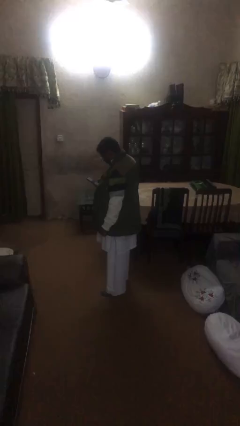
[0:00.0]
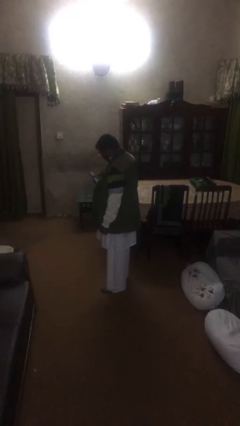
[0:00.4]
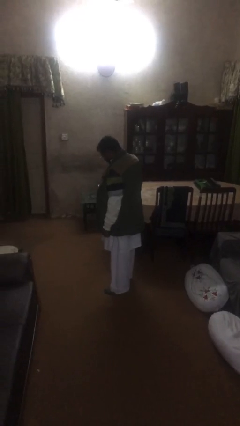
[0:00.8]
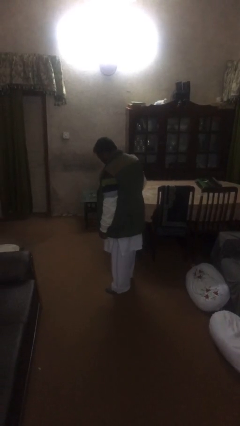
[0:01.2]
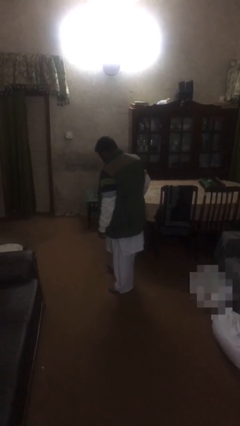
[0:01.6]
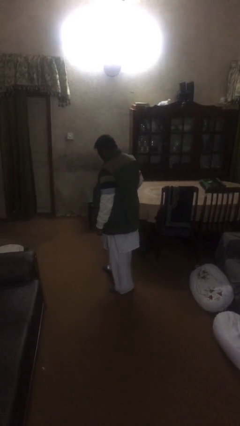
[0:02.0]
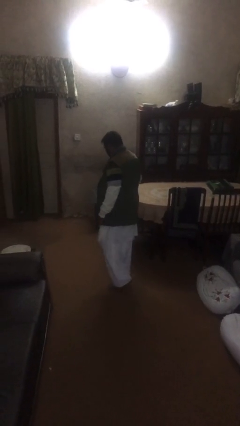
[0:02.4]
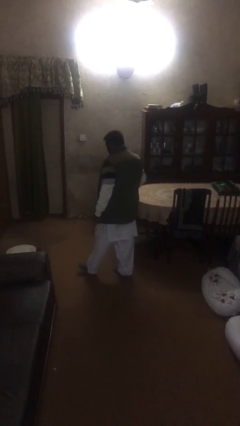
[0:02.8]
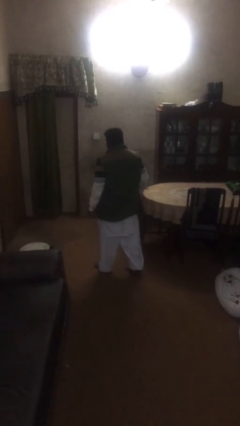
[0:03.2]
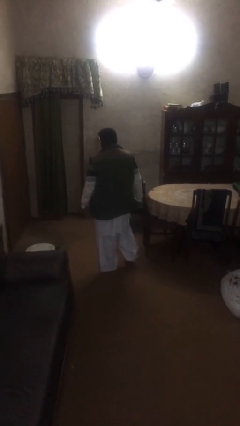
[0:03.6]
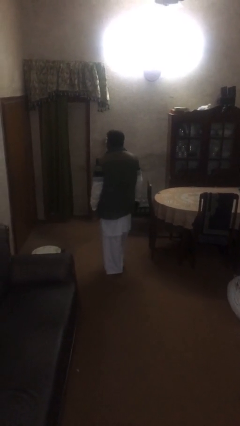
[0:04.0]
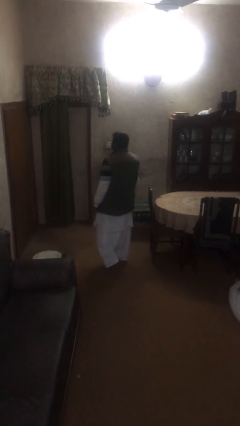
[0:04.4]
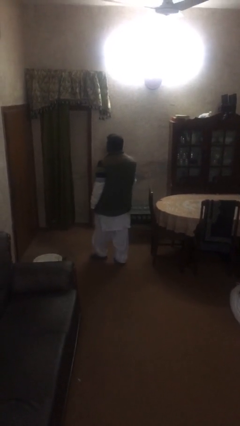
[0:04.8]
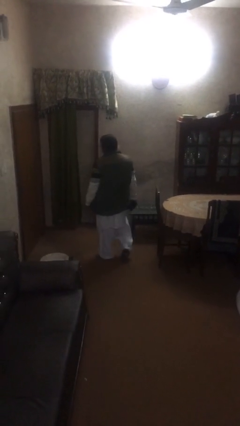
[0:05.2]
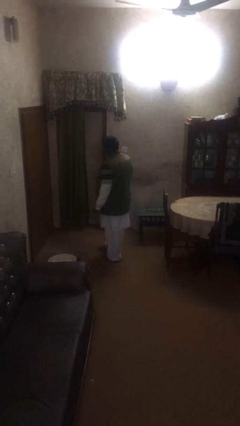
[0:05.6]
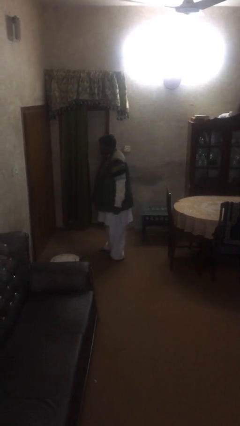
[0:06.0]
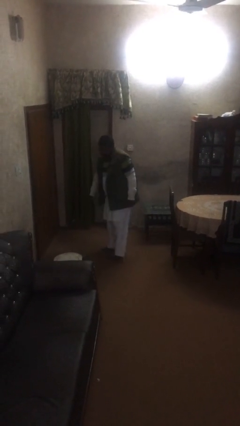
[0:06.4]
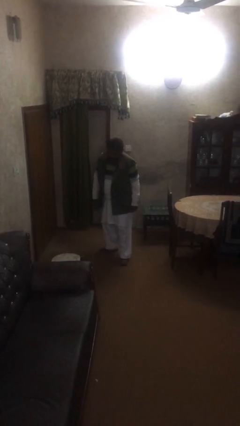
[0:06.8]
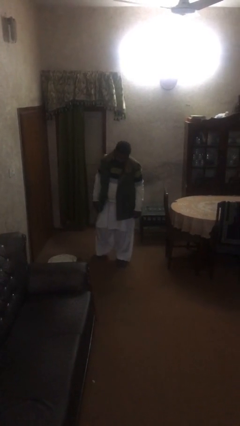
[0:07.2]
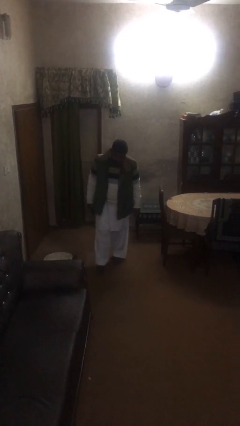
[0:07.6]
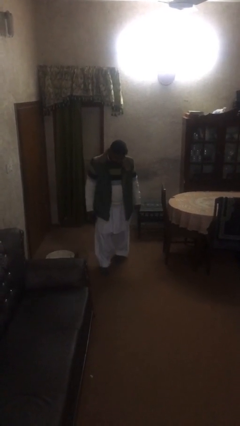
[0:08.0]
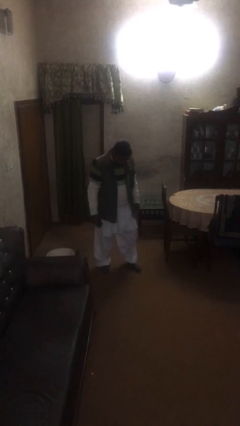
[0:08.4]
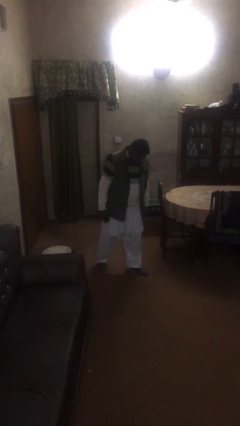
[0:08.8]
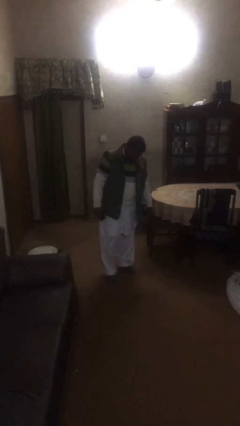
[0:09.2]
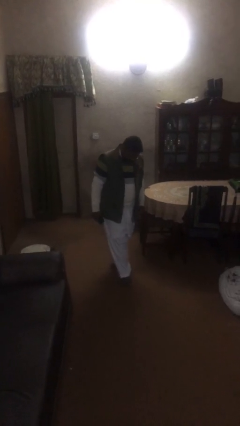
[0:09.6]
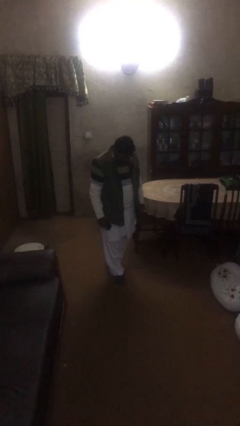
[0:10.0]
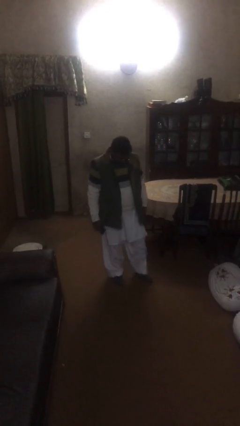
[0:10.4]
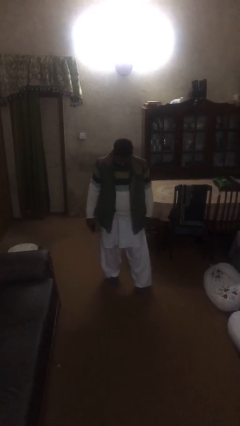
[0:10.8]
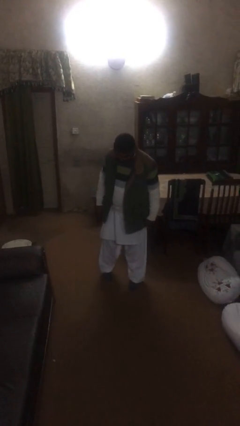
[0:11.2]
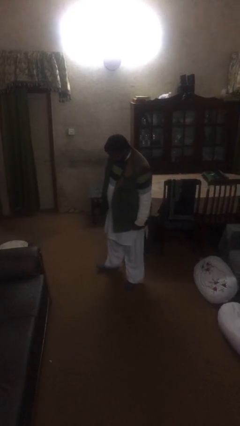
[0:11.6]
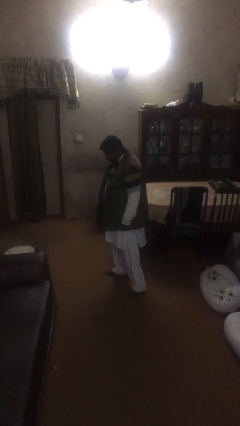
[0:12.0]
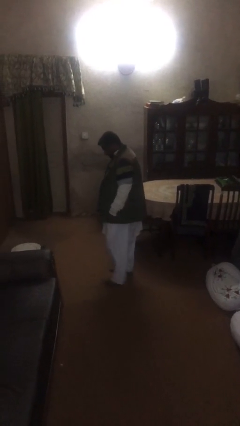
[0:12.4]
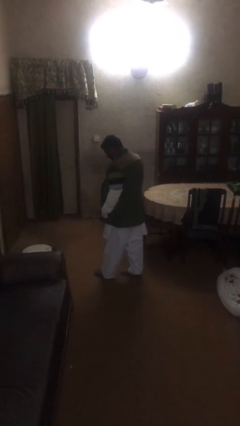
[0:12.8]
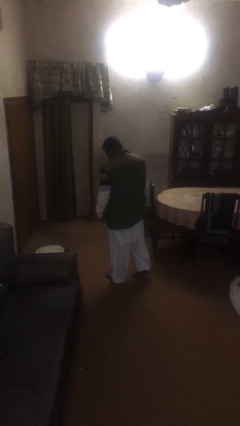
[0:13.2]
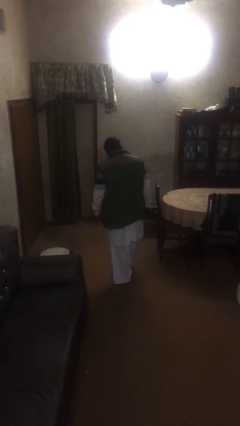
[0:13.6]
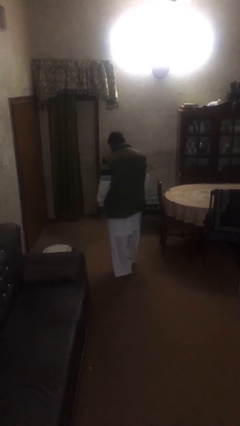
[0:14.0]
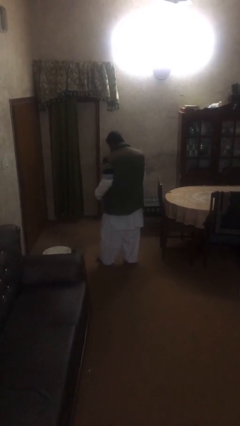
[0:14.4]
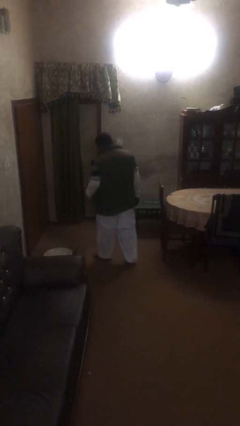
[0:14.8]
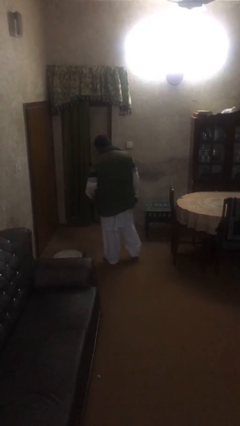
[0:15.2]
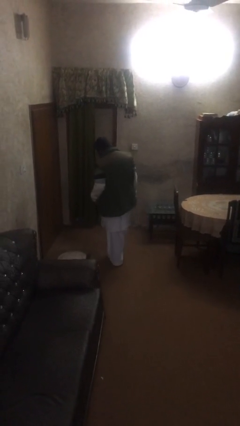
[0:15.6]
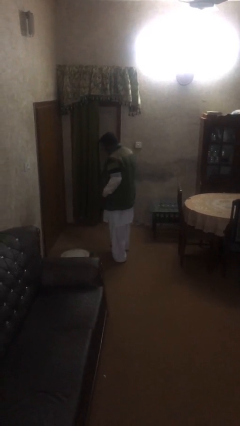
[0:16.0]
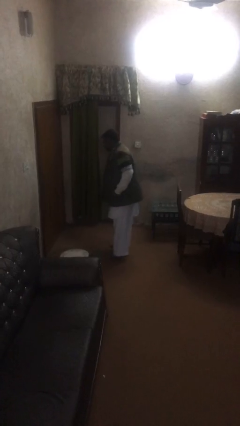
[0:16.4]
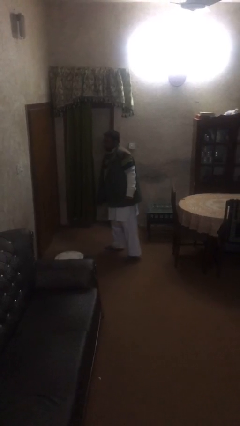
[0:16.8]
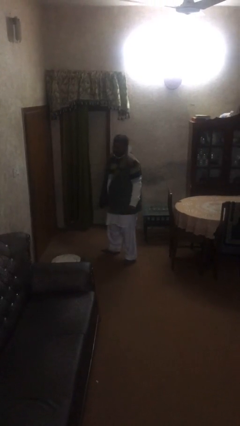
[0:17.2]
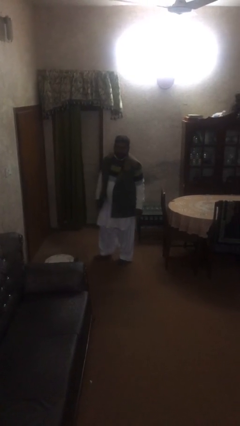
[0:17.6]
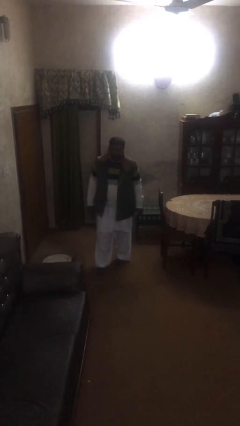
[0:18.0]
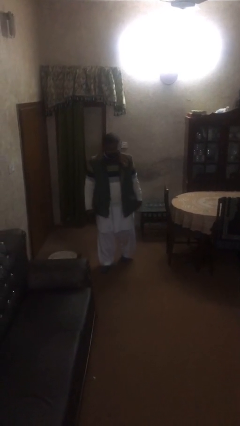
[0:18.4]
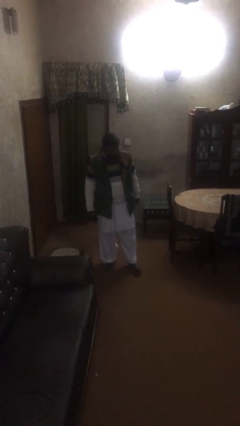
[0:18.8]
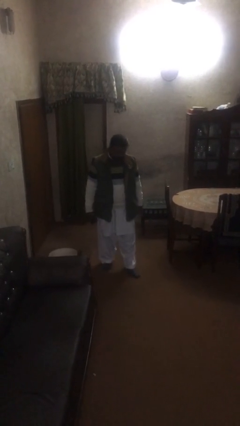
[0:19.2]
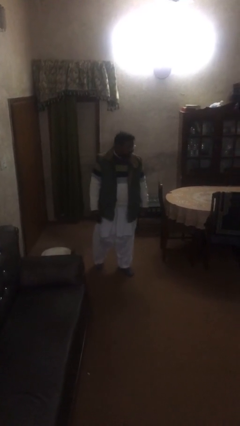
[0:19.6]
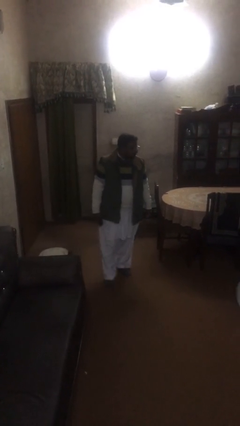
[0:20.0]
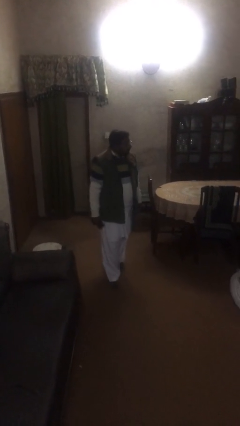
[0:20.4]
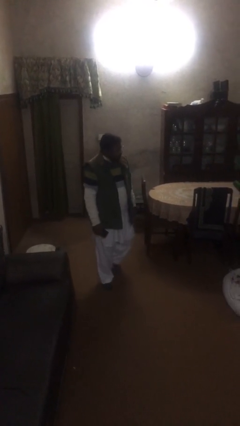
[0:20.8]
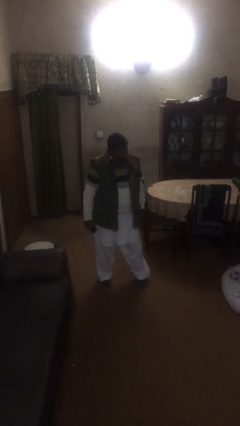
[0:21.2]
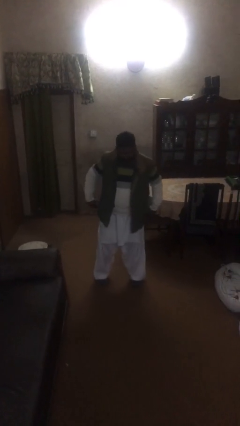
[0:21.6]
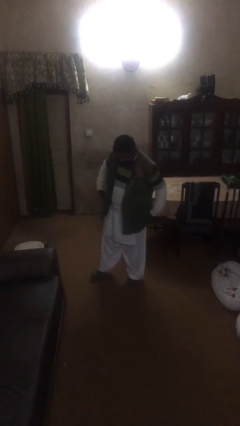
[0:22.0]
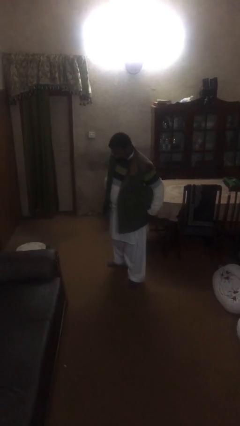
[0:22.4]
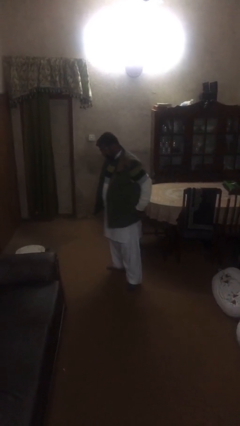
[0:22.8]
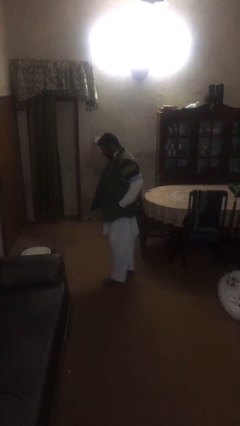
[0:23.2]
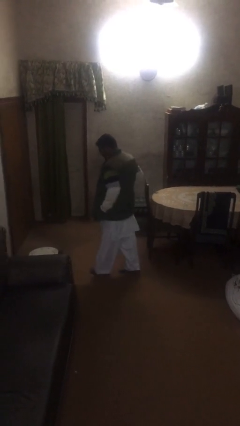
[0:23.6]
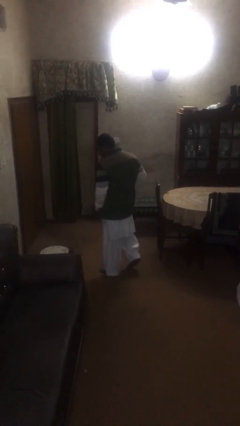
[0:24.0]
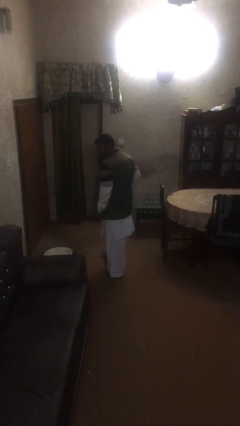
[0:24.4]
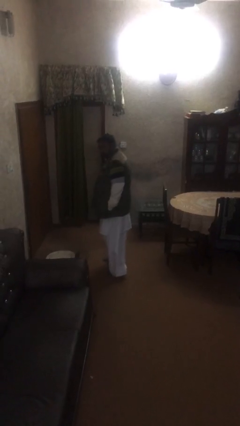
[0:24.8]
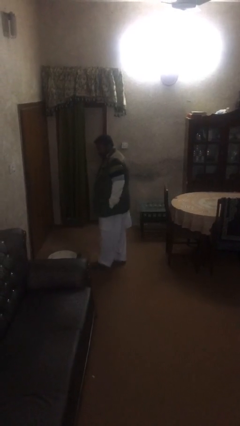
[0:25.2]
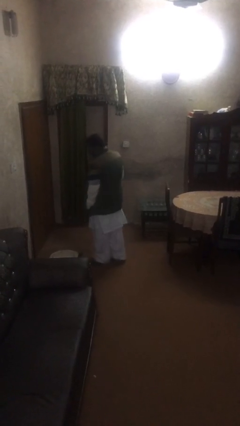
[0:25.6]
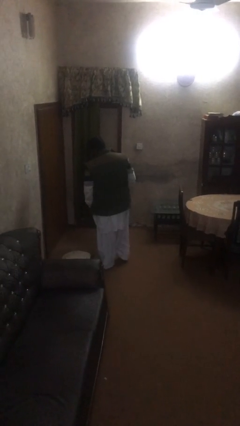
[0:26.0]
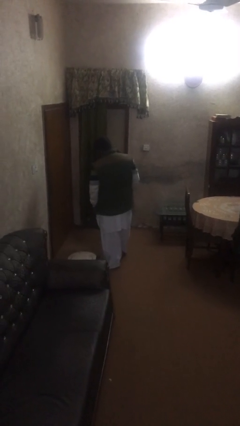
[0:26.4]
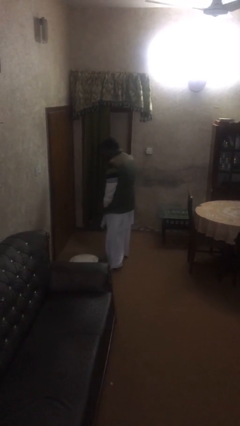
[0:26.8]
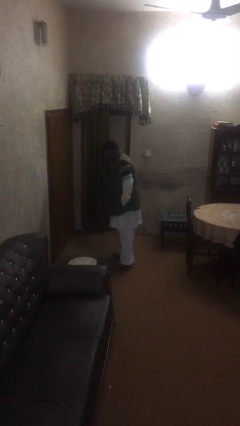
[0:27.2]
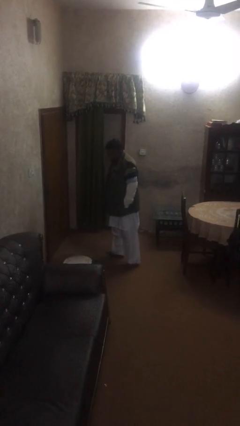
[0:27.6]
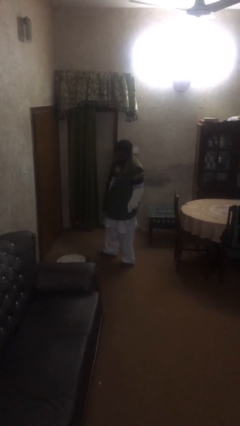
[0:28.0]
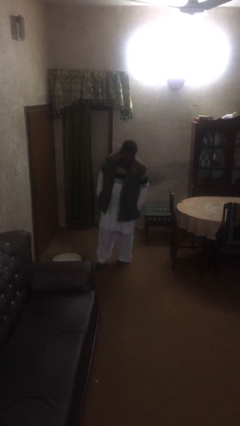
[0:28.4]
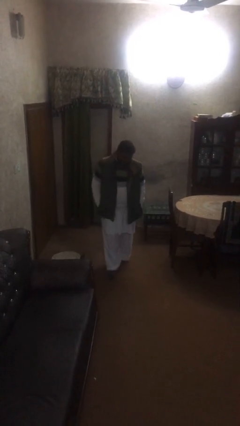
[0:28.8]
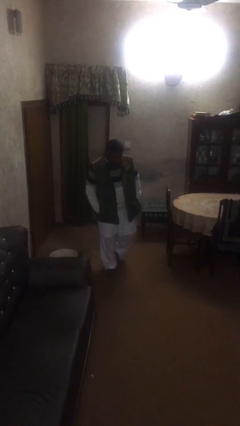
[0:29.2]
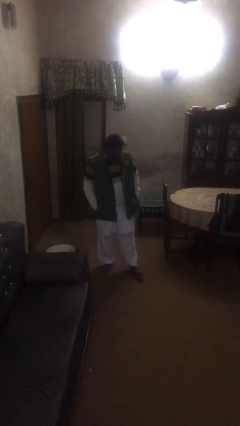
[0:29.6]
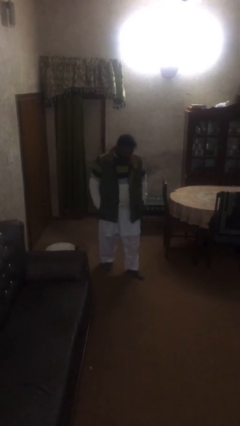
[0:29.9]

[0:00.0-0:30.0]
person walks

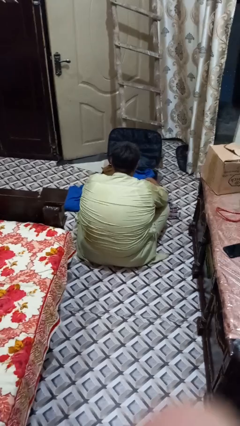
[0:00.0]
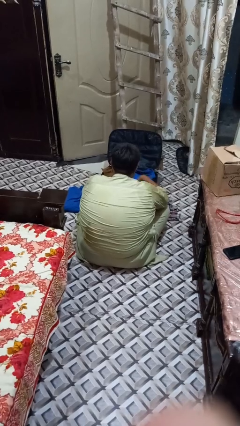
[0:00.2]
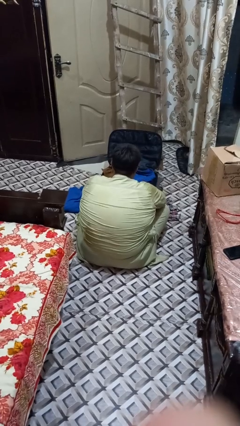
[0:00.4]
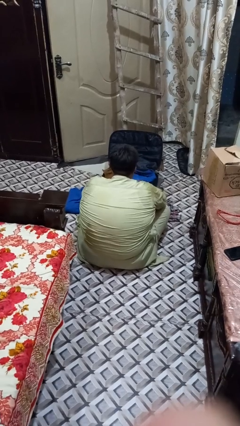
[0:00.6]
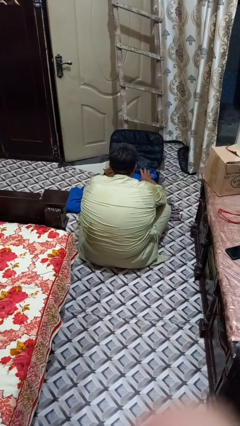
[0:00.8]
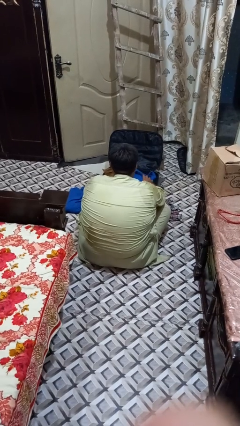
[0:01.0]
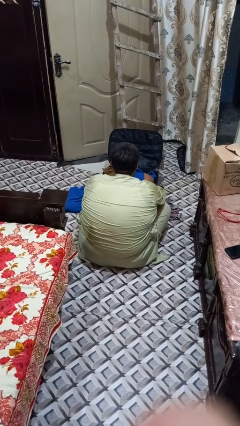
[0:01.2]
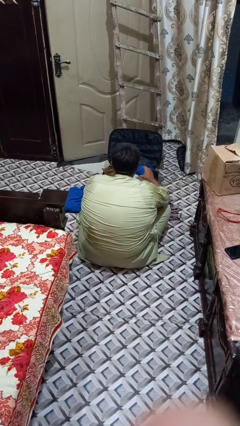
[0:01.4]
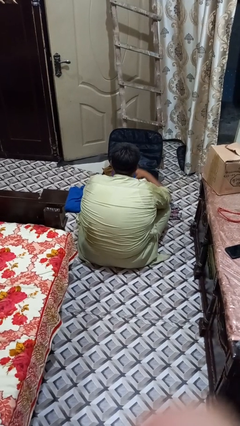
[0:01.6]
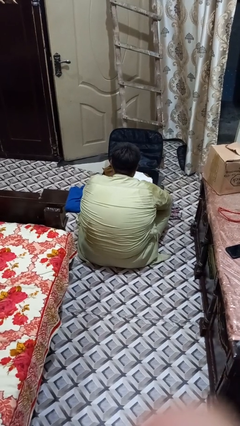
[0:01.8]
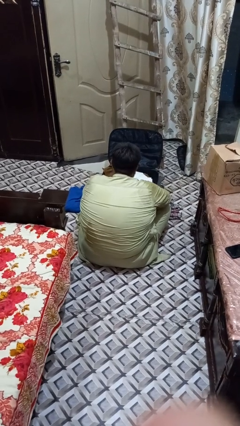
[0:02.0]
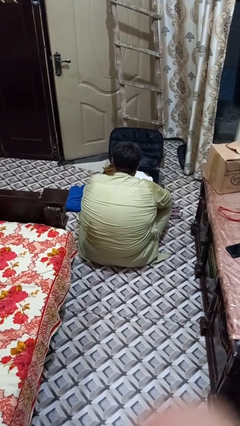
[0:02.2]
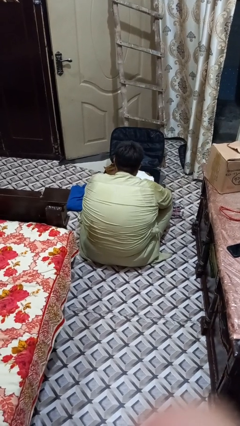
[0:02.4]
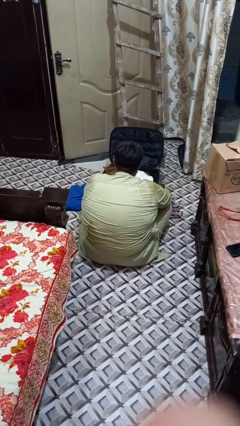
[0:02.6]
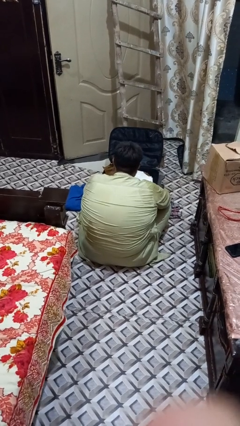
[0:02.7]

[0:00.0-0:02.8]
person unloads clothes from suitcase

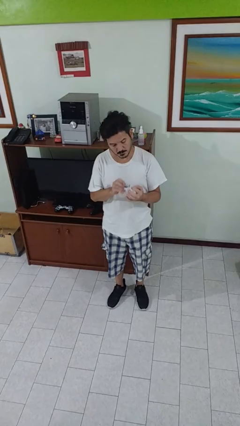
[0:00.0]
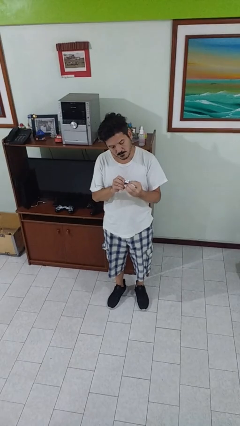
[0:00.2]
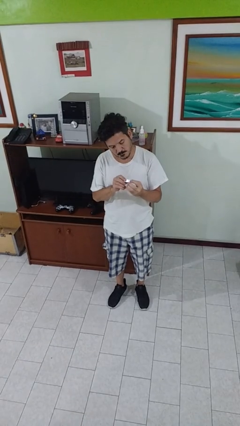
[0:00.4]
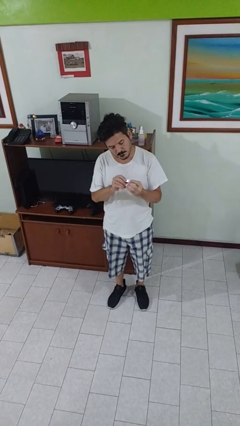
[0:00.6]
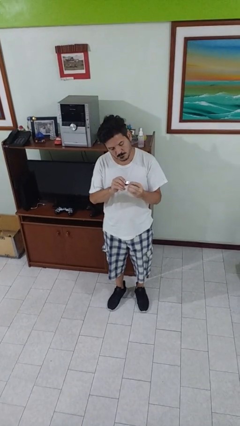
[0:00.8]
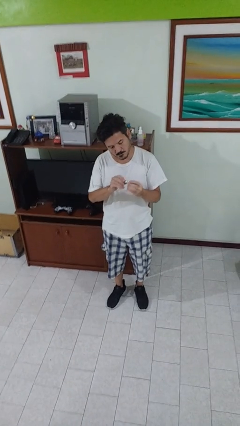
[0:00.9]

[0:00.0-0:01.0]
person clips fingernails
